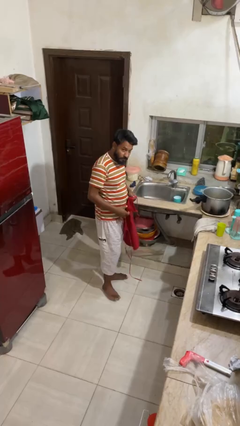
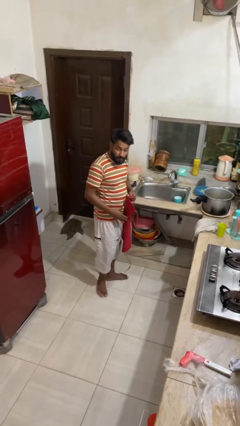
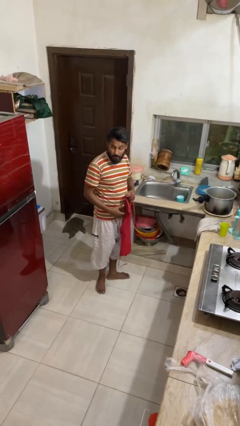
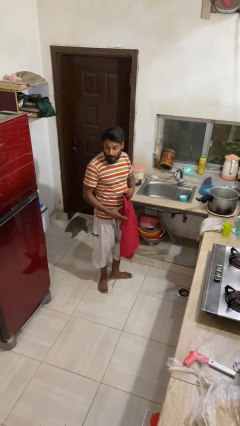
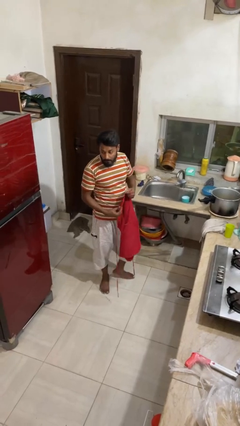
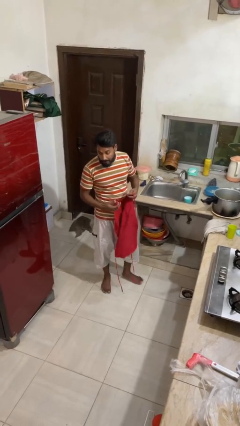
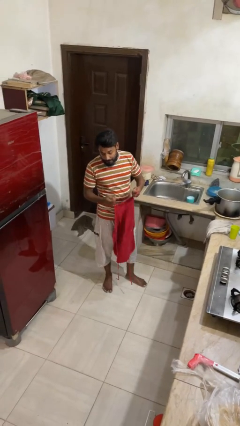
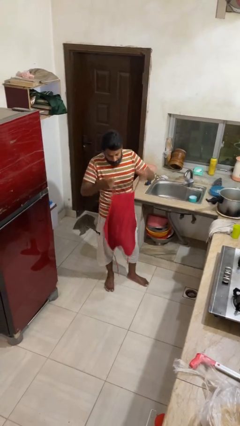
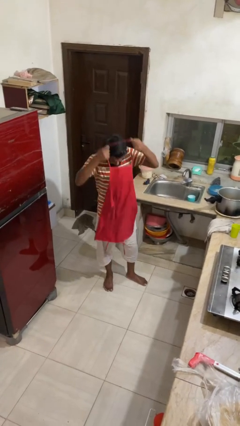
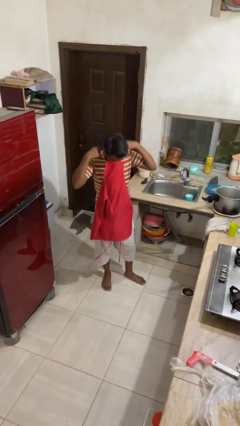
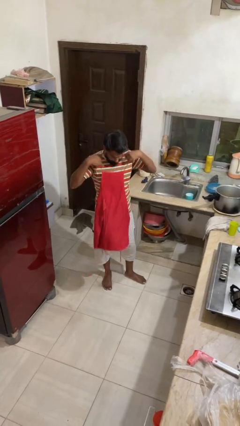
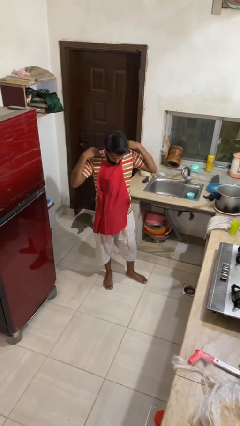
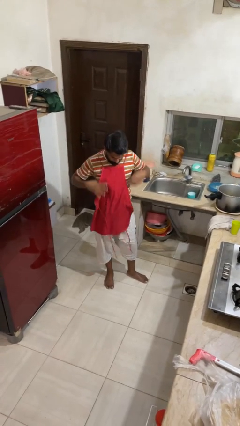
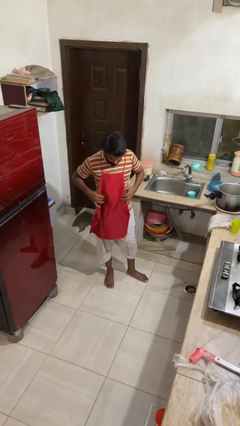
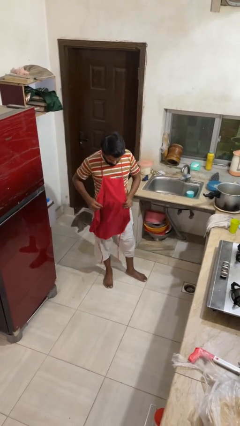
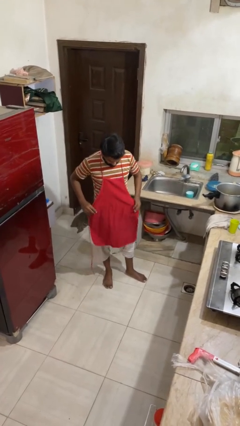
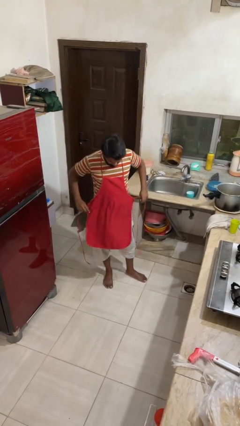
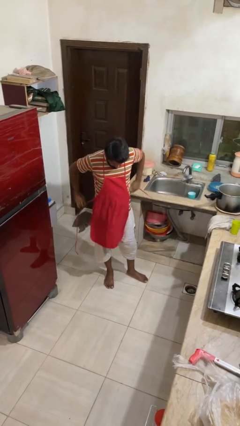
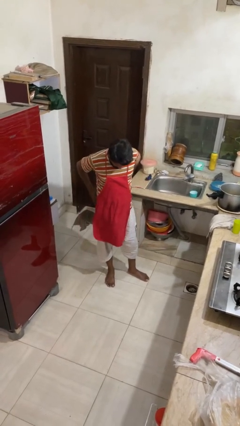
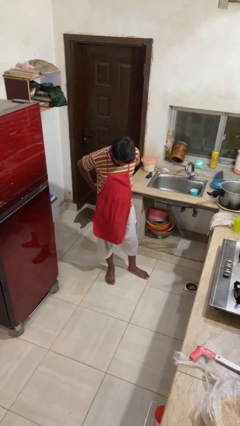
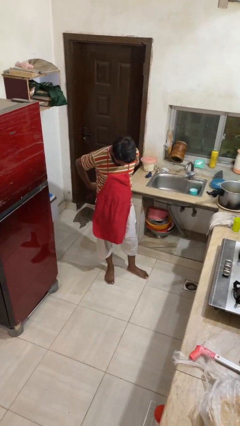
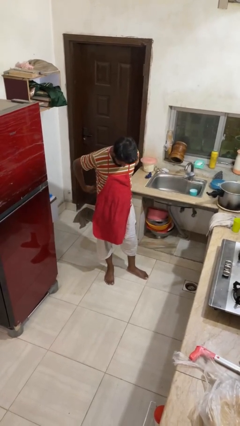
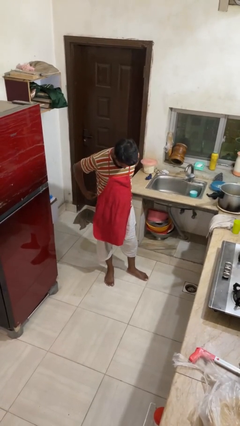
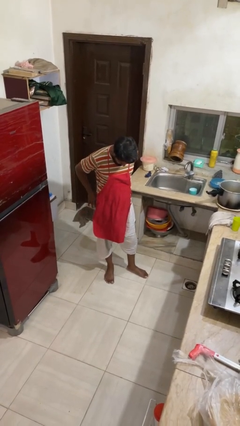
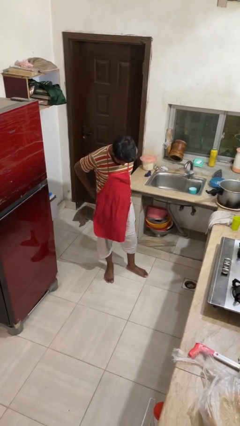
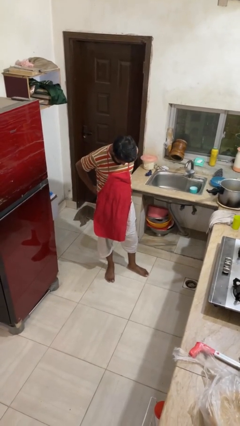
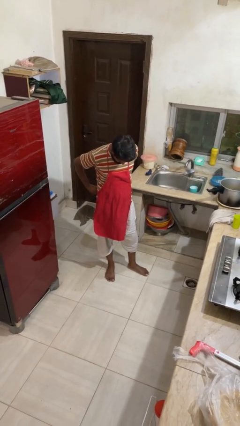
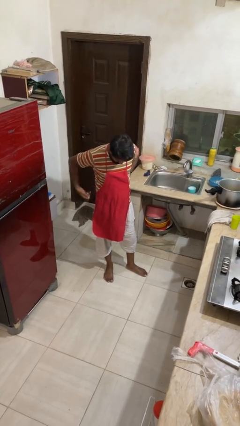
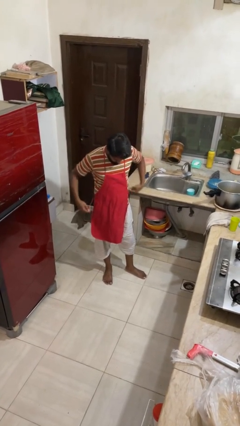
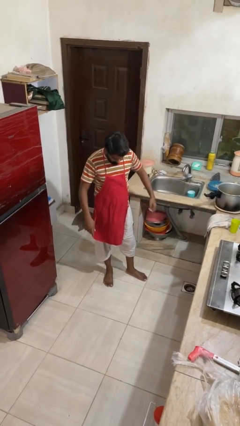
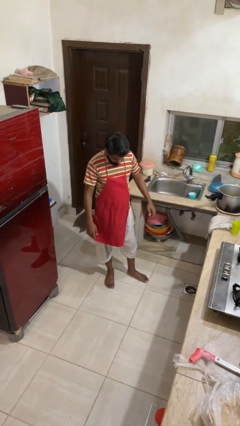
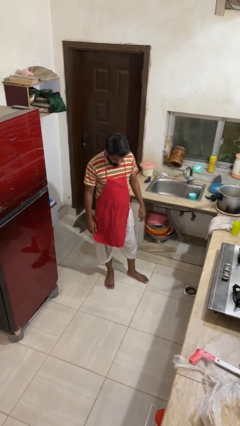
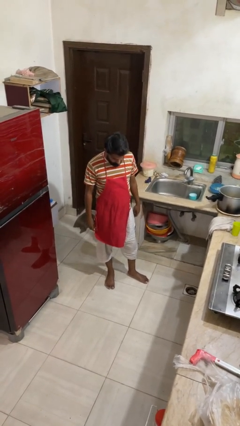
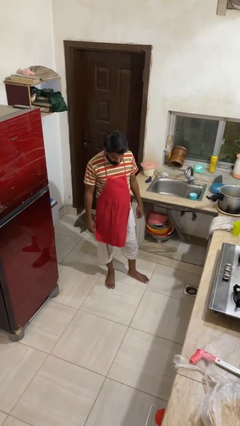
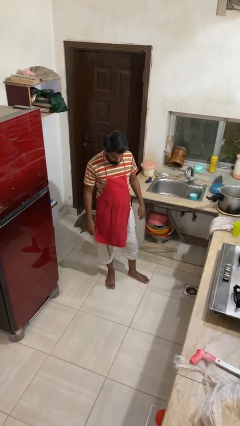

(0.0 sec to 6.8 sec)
person puts on apron

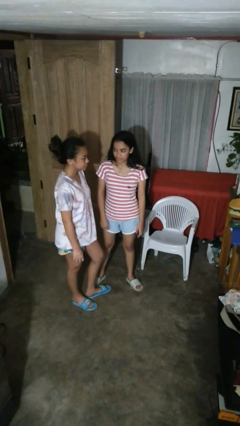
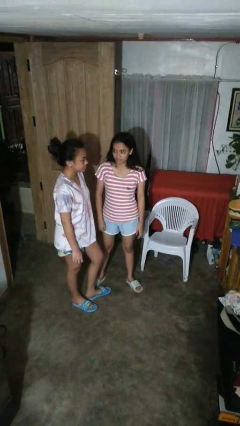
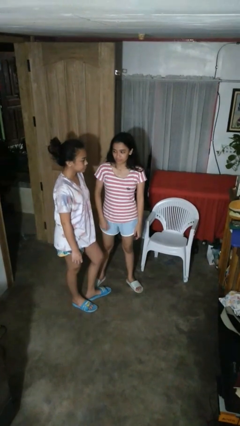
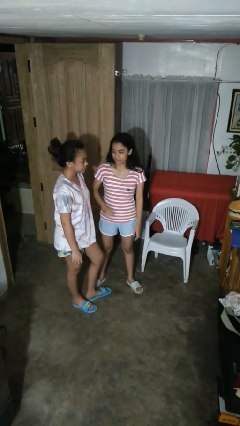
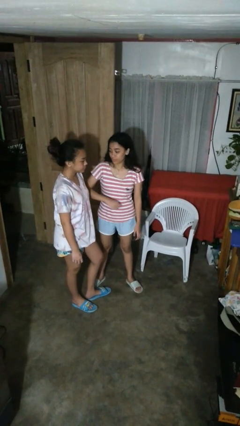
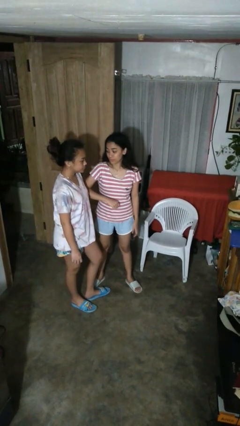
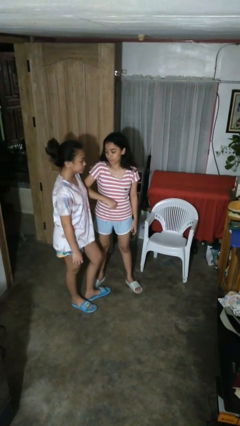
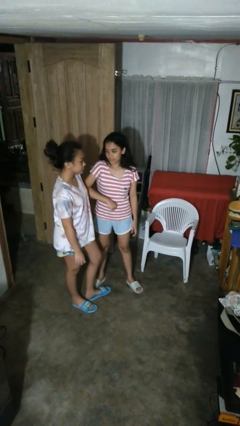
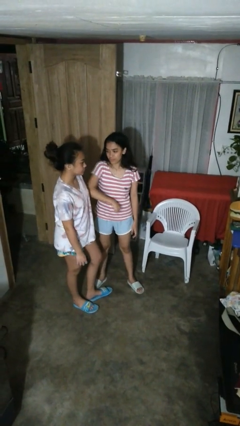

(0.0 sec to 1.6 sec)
person nudges person with elbow

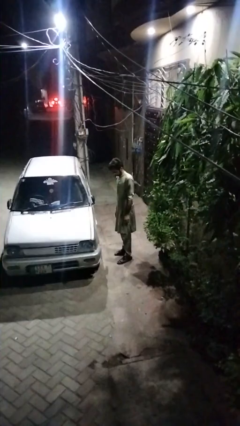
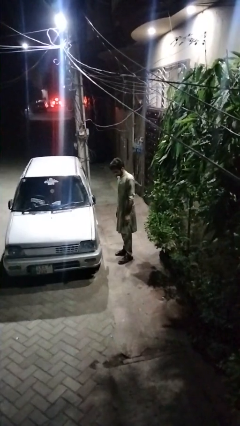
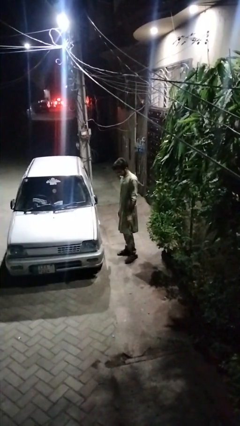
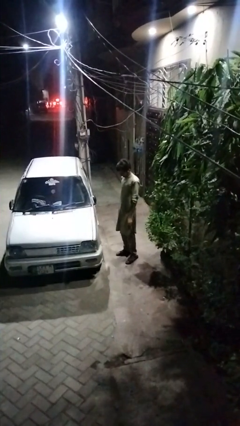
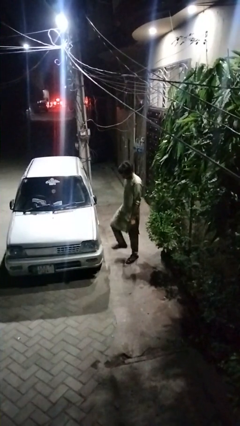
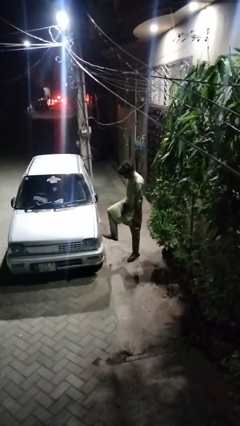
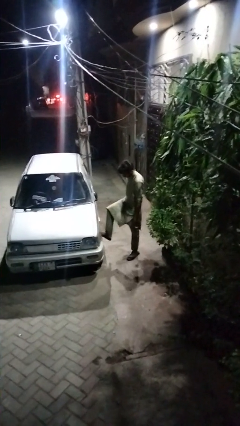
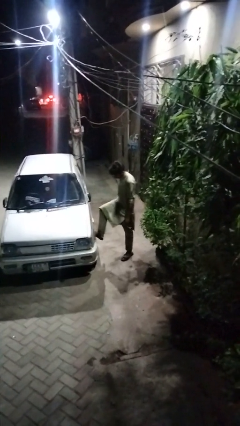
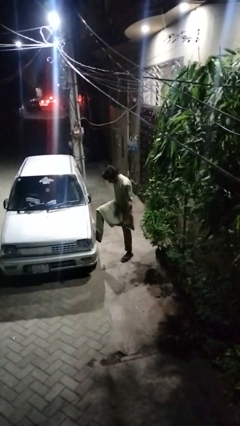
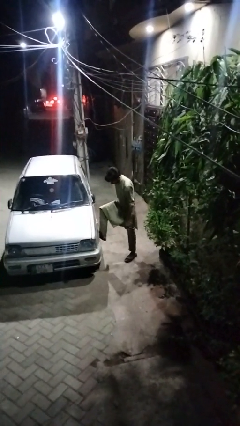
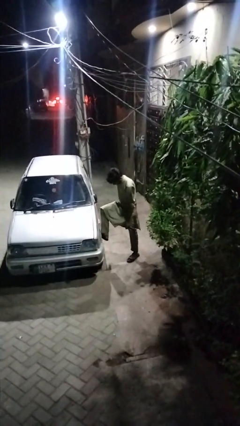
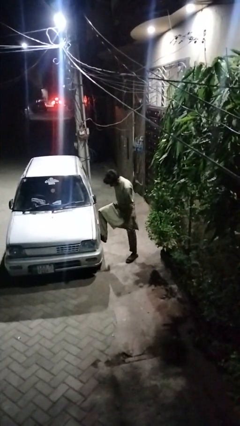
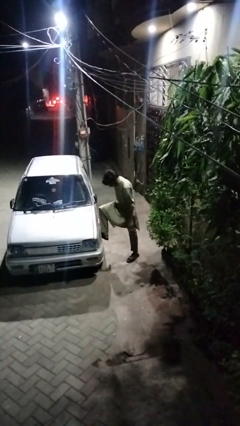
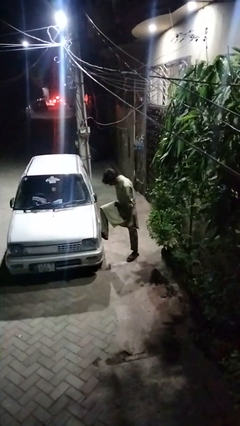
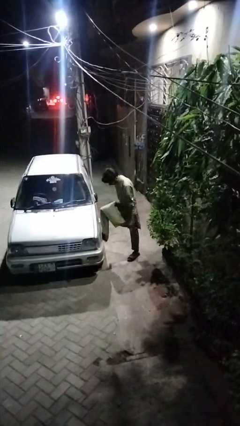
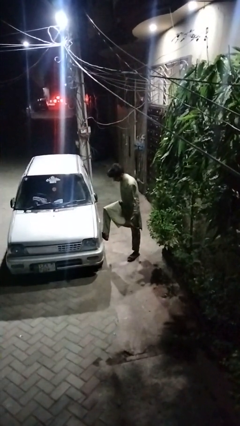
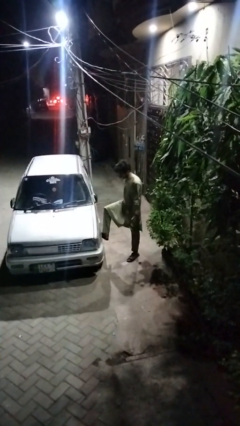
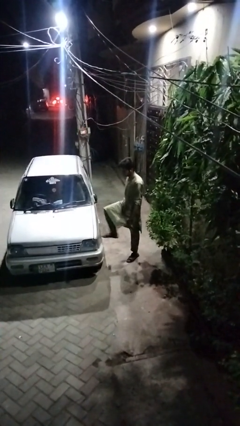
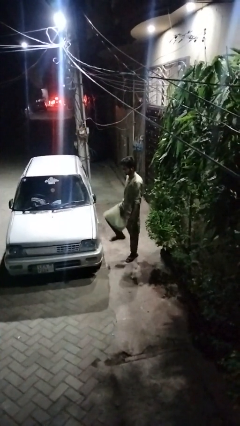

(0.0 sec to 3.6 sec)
person kicks car tires

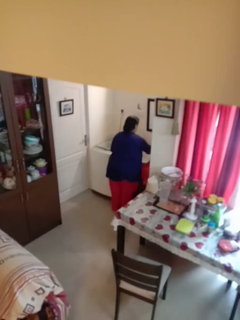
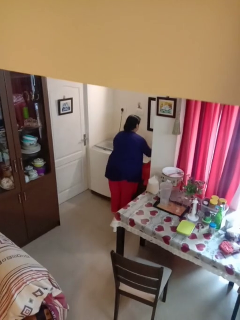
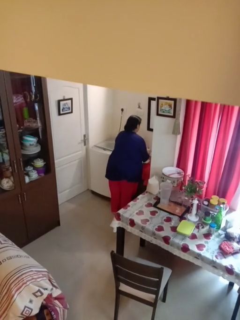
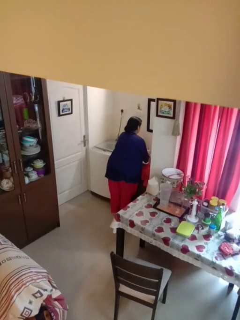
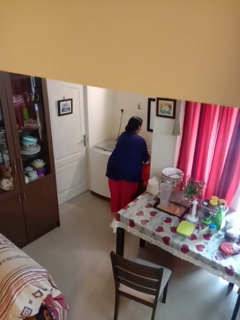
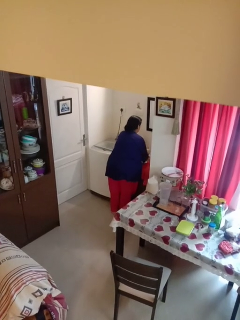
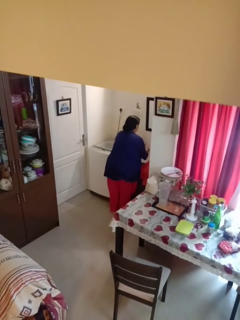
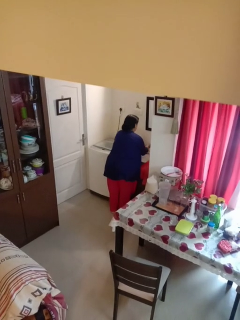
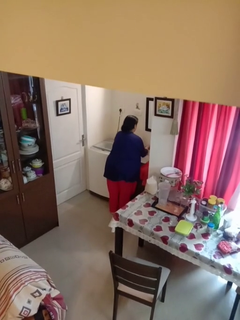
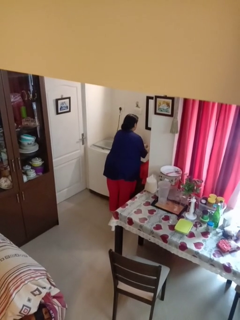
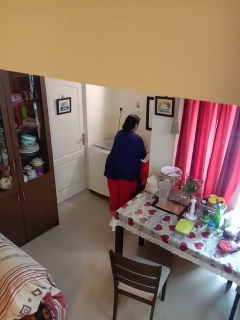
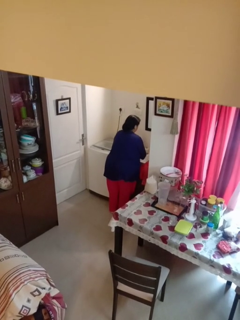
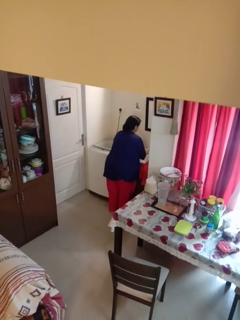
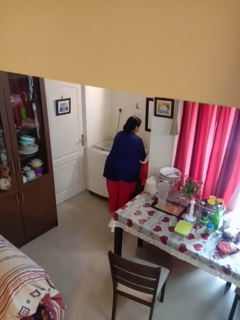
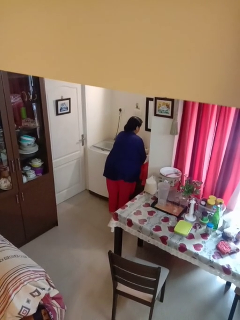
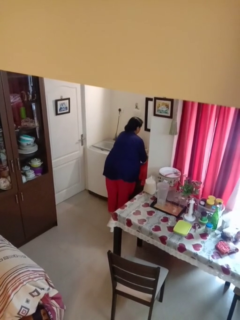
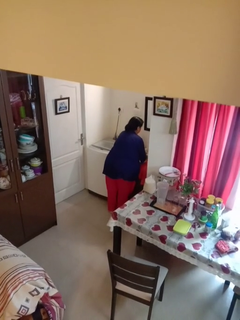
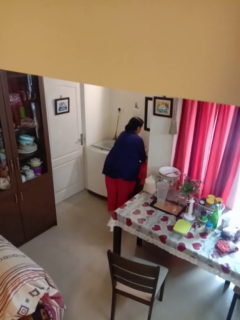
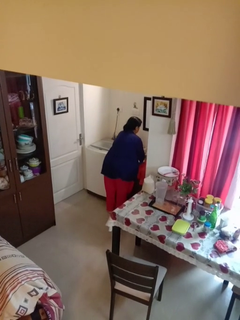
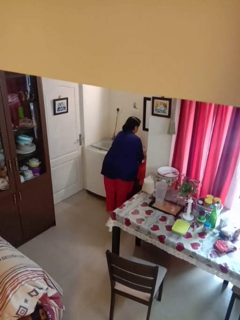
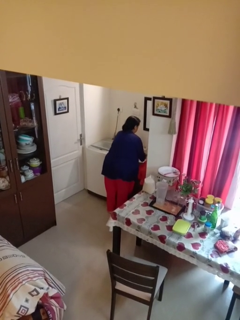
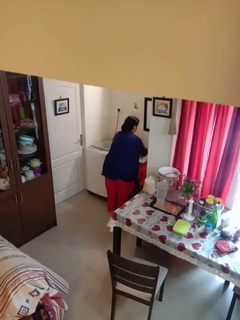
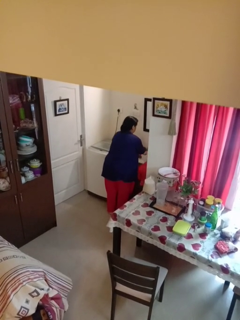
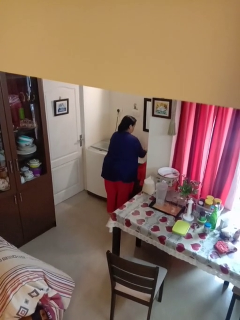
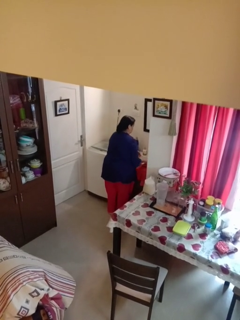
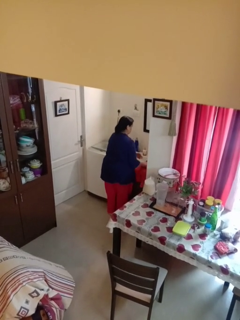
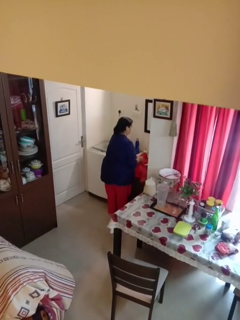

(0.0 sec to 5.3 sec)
person washes hands

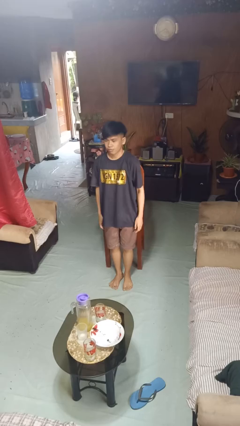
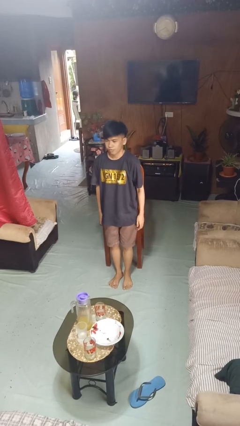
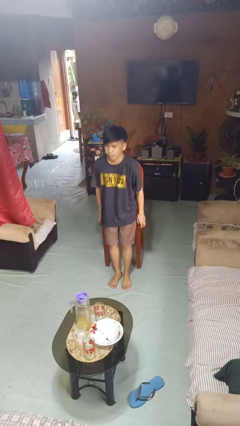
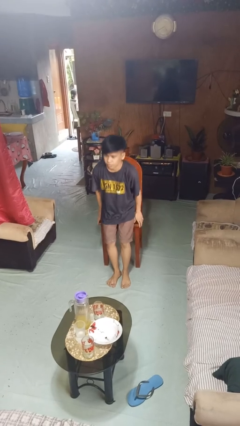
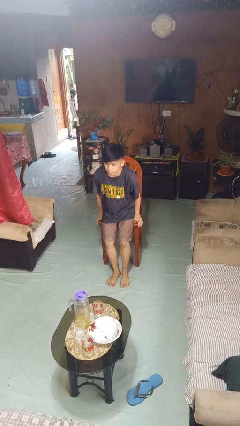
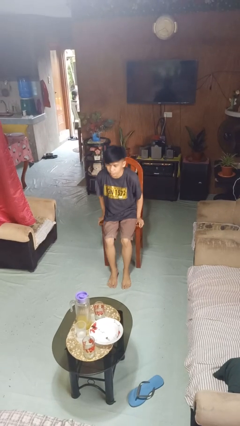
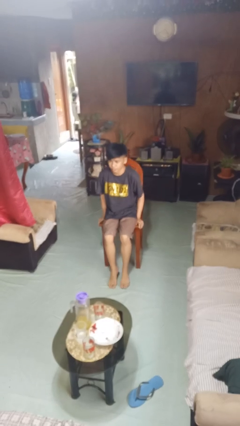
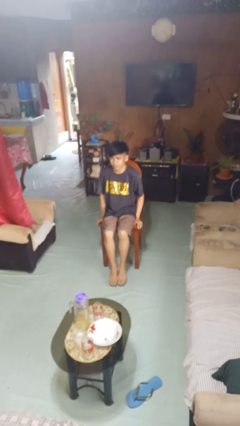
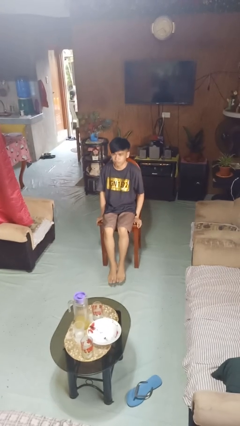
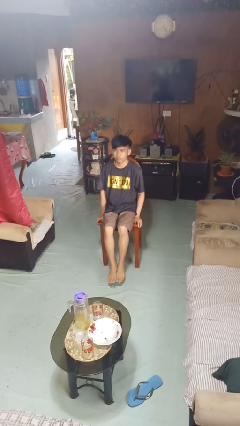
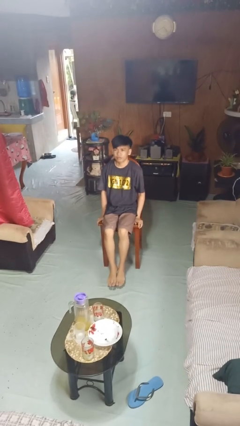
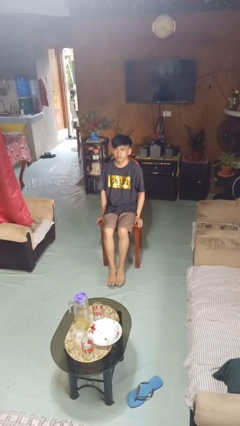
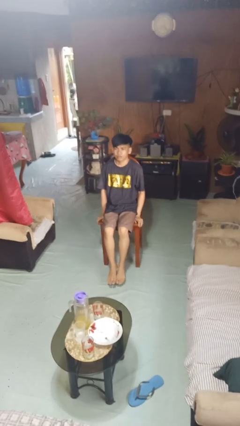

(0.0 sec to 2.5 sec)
person sits down
